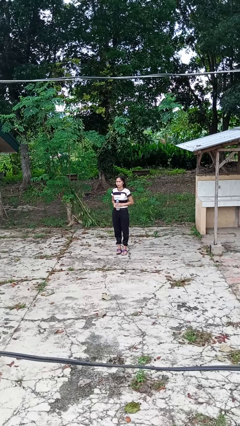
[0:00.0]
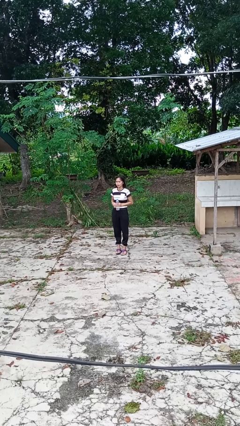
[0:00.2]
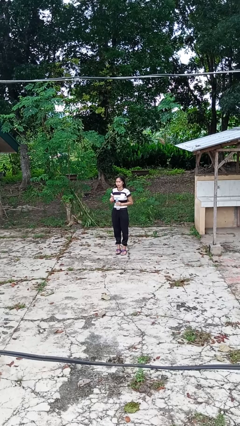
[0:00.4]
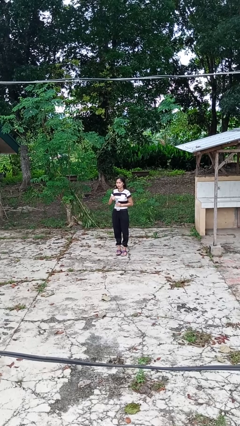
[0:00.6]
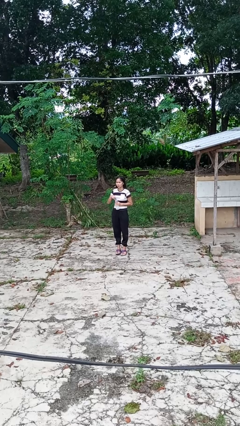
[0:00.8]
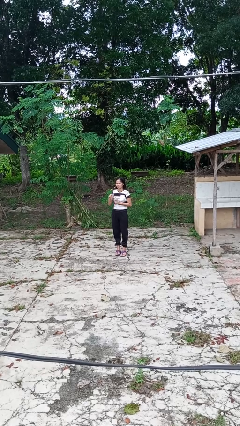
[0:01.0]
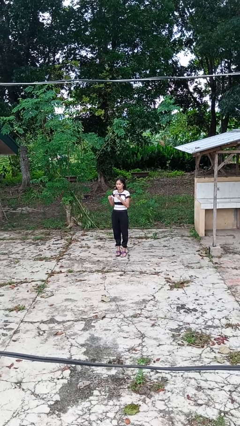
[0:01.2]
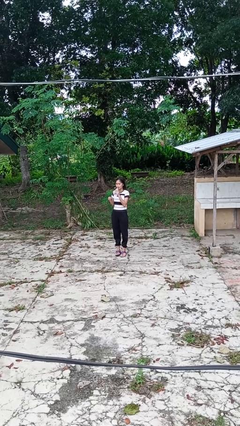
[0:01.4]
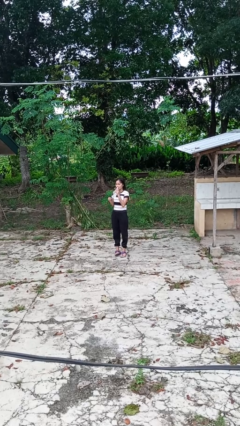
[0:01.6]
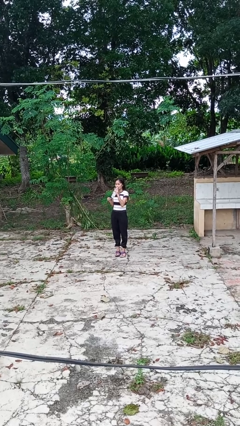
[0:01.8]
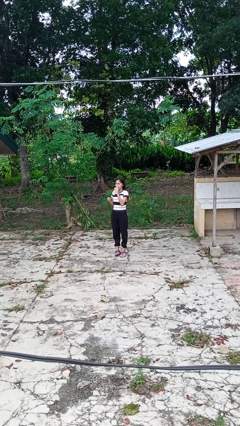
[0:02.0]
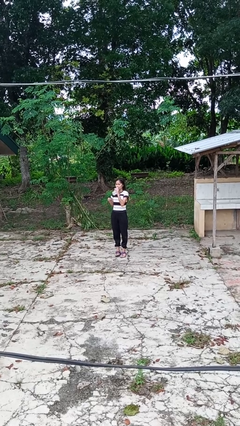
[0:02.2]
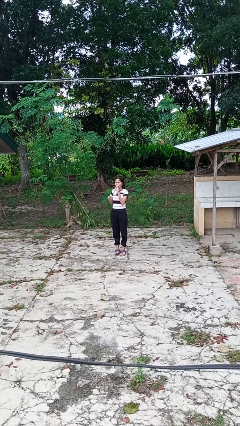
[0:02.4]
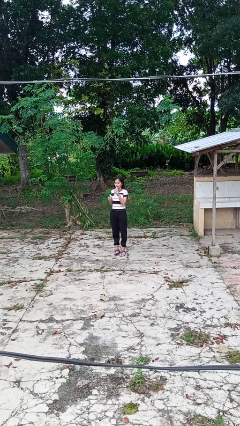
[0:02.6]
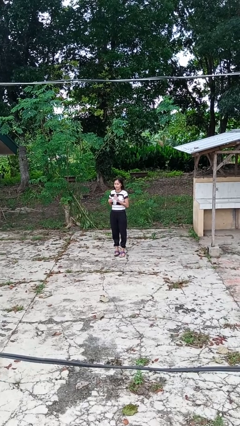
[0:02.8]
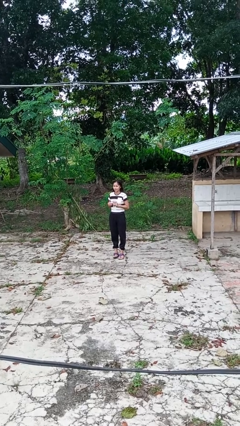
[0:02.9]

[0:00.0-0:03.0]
person drinks from bottle

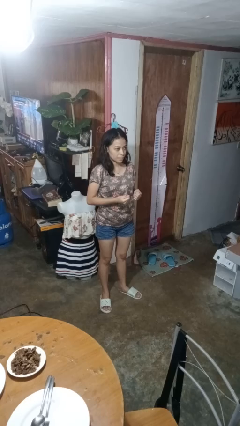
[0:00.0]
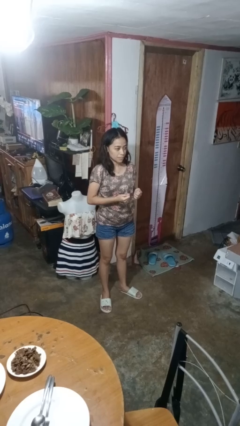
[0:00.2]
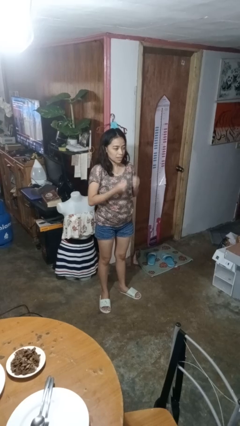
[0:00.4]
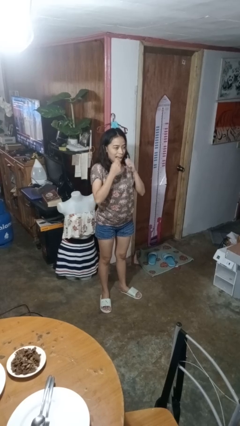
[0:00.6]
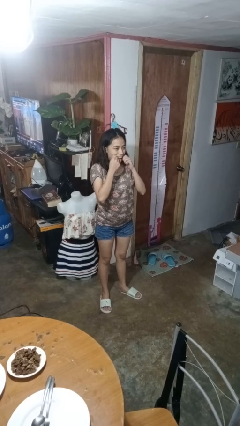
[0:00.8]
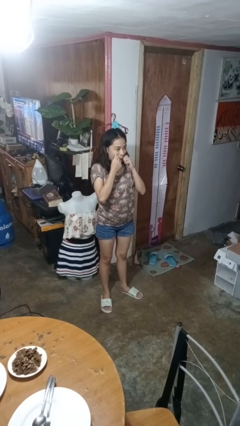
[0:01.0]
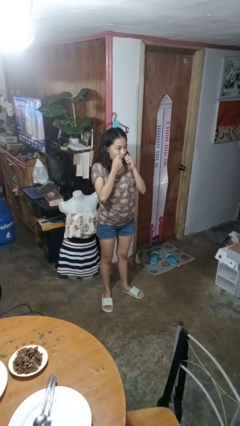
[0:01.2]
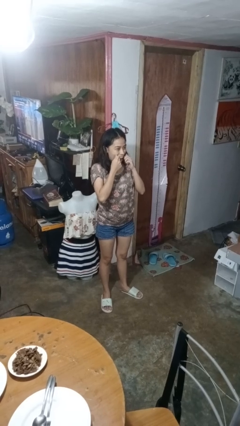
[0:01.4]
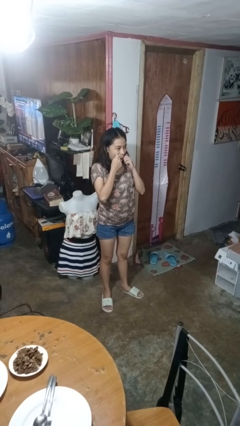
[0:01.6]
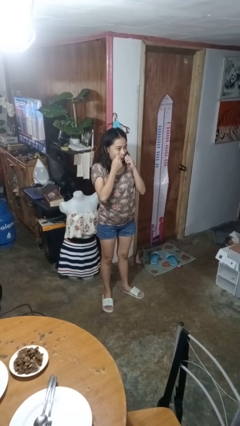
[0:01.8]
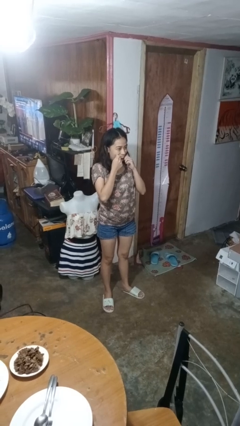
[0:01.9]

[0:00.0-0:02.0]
person flosses

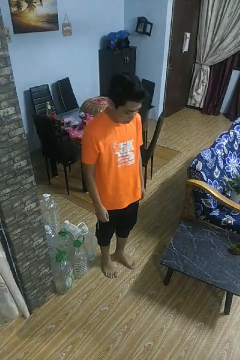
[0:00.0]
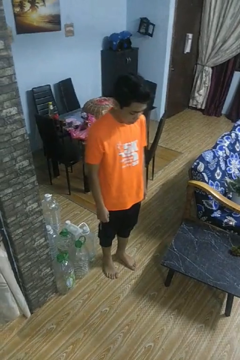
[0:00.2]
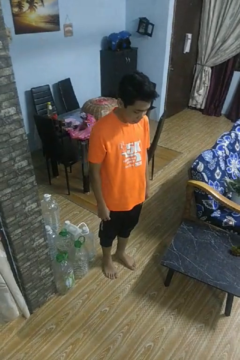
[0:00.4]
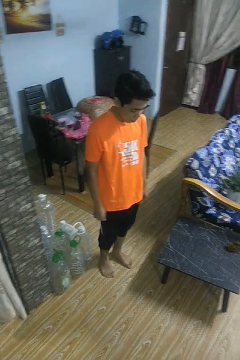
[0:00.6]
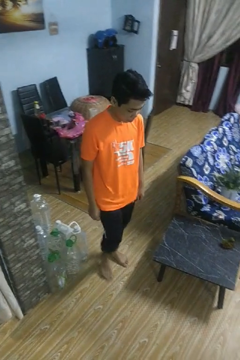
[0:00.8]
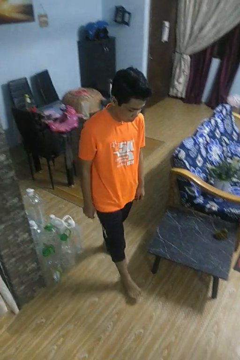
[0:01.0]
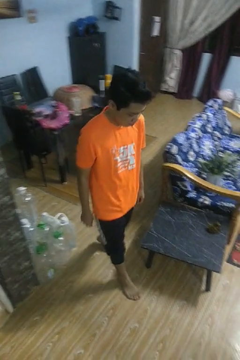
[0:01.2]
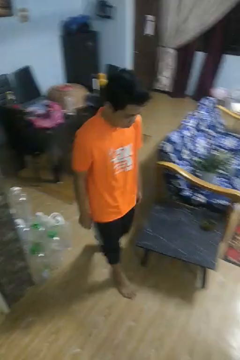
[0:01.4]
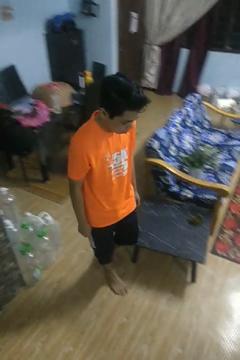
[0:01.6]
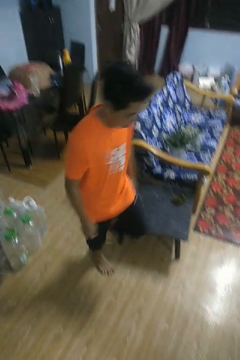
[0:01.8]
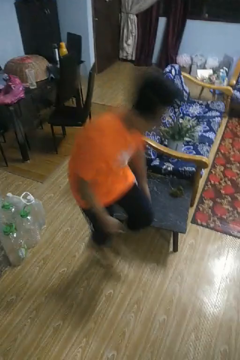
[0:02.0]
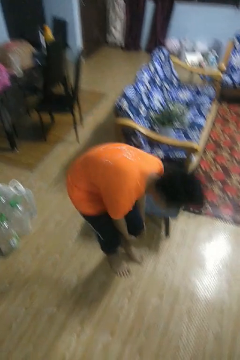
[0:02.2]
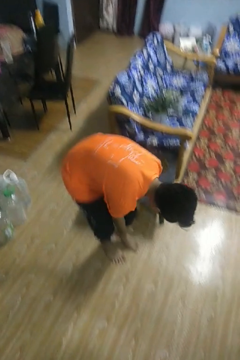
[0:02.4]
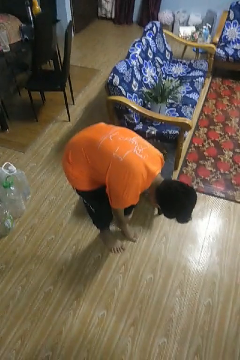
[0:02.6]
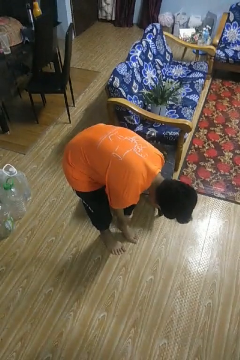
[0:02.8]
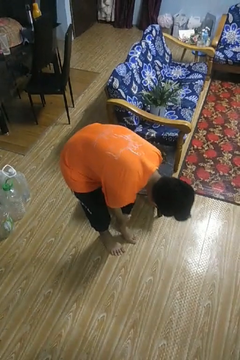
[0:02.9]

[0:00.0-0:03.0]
person bumps into table

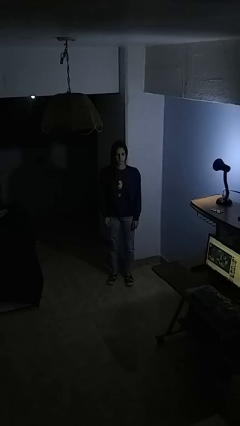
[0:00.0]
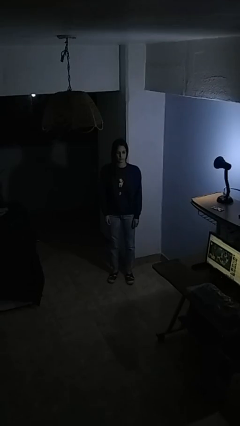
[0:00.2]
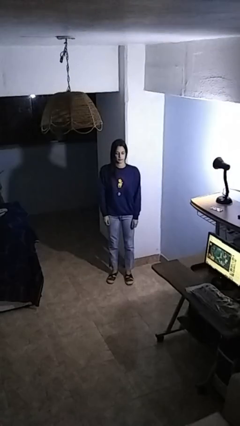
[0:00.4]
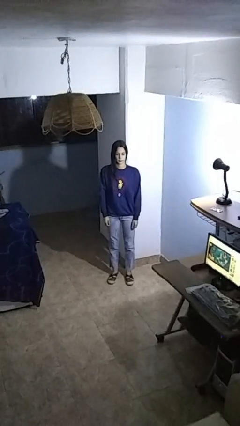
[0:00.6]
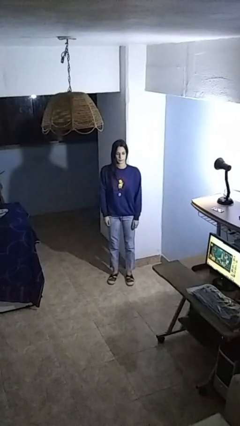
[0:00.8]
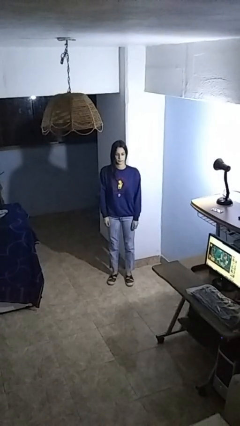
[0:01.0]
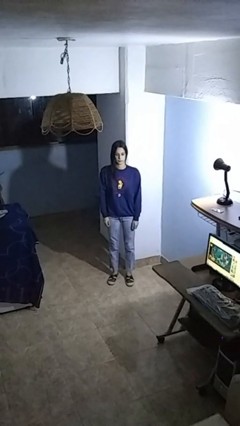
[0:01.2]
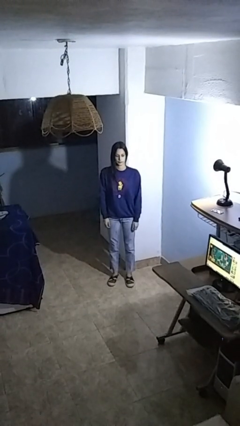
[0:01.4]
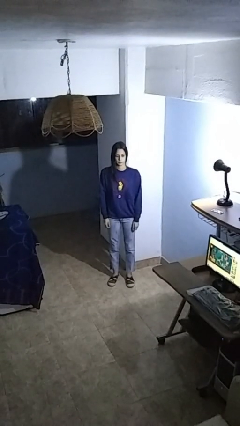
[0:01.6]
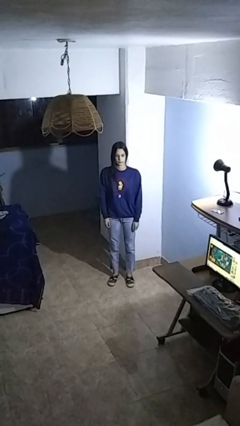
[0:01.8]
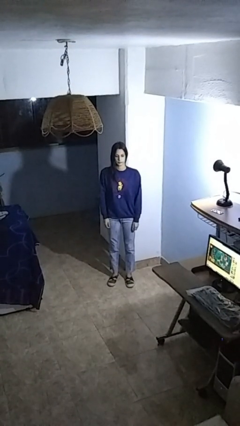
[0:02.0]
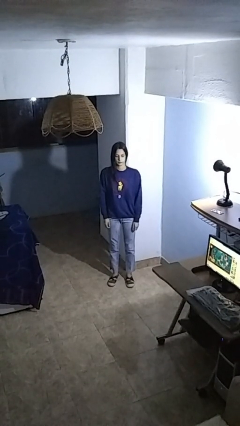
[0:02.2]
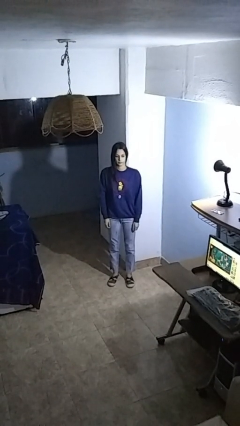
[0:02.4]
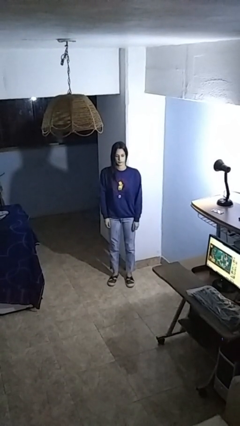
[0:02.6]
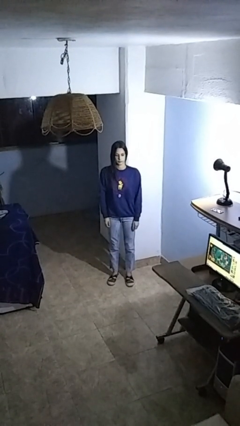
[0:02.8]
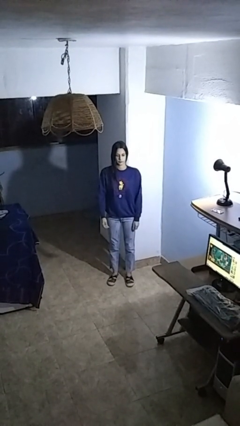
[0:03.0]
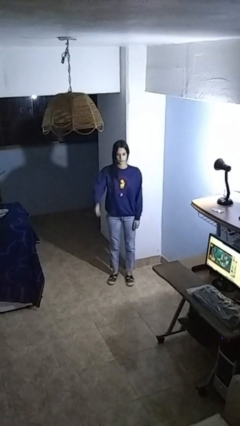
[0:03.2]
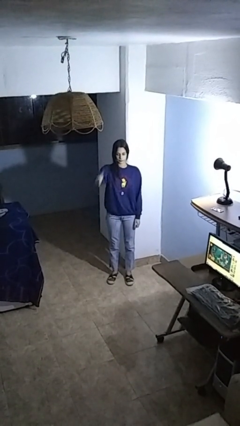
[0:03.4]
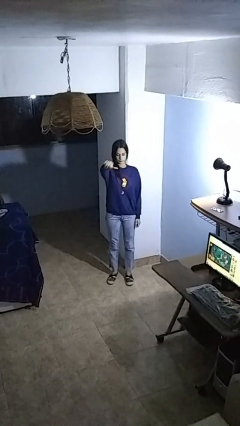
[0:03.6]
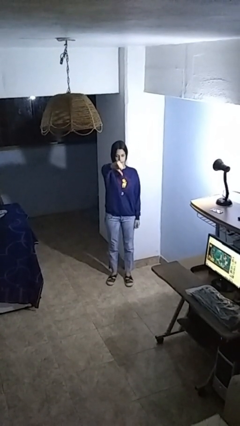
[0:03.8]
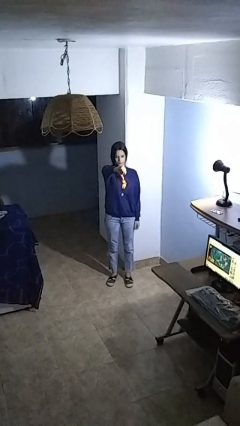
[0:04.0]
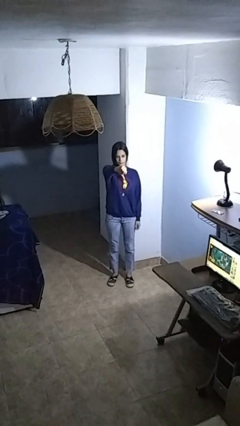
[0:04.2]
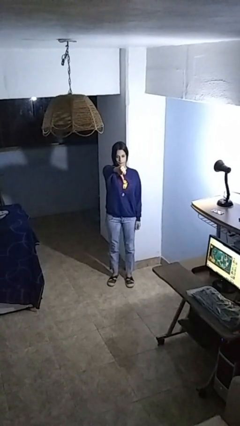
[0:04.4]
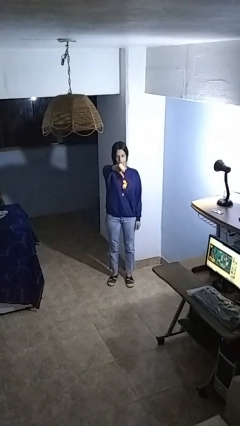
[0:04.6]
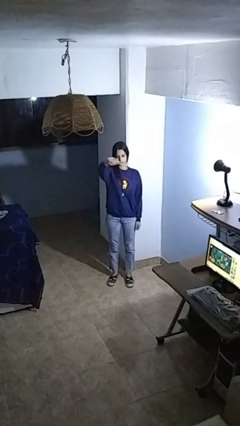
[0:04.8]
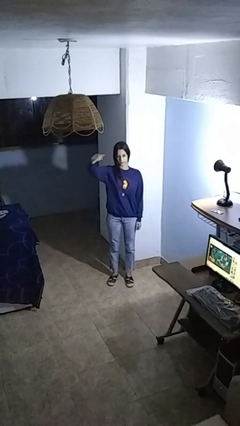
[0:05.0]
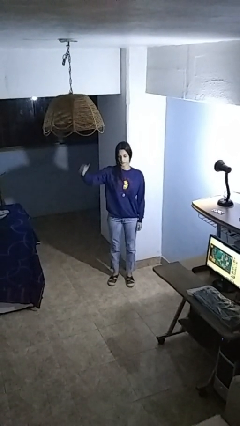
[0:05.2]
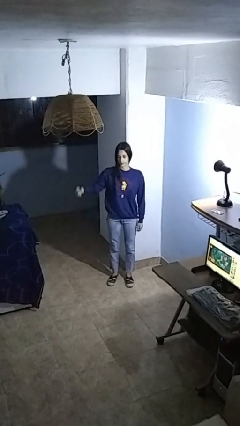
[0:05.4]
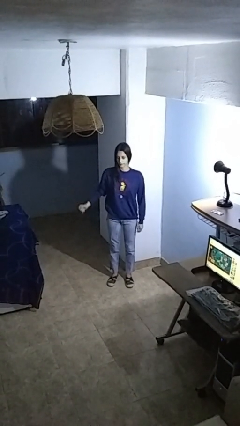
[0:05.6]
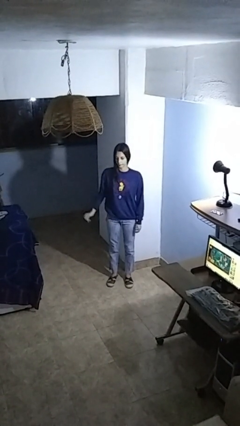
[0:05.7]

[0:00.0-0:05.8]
person gestures thumbs down

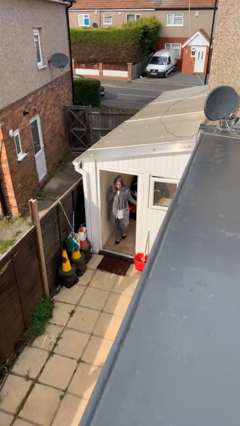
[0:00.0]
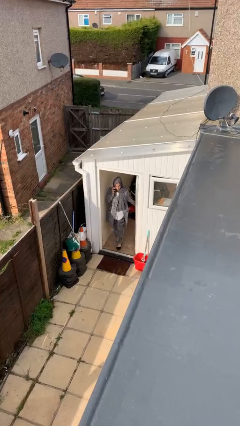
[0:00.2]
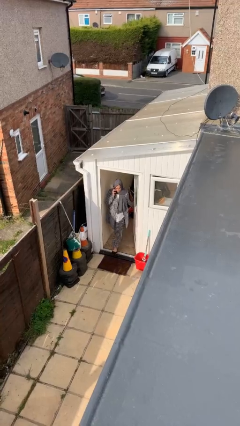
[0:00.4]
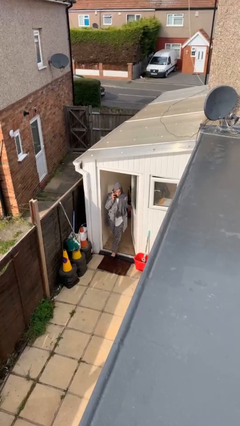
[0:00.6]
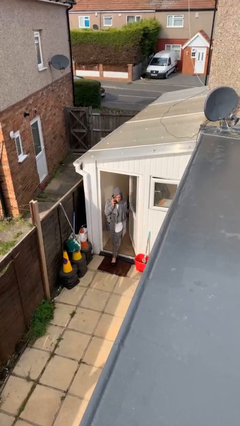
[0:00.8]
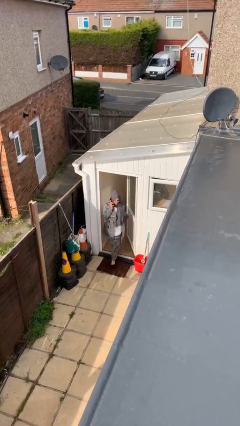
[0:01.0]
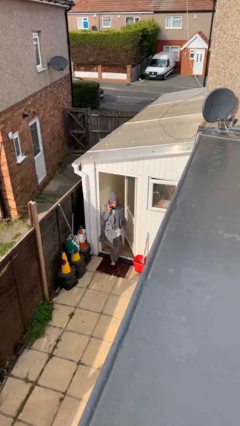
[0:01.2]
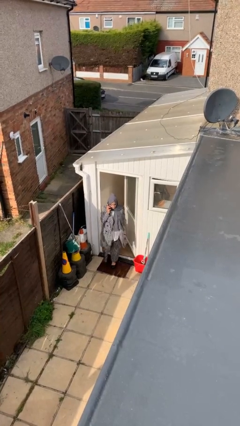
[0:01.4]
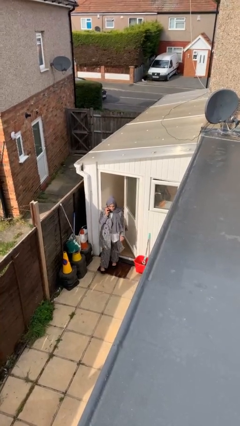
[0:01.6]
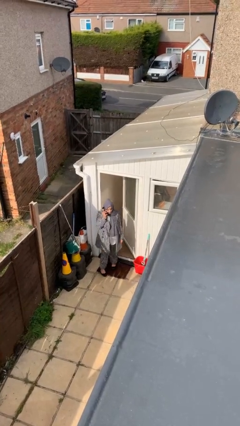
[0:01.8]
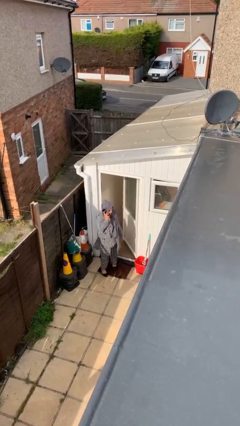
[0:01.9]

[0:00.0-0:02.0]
person enters scene through structure

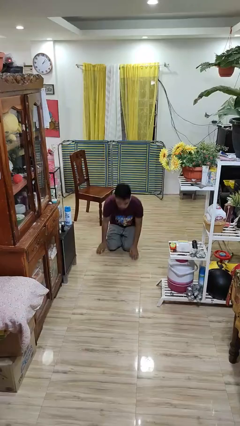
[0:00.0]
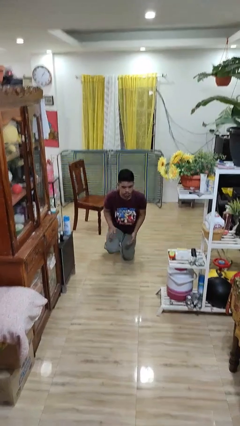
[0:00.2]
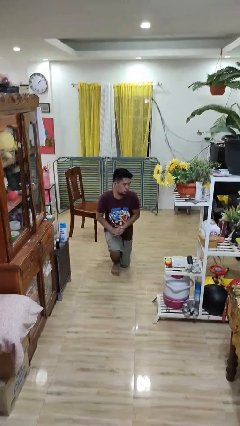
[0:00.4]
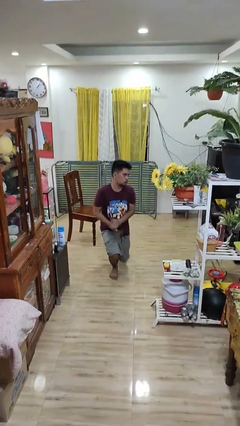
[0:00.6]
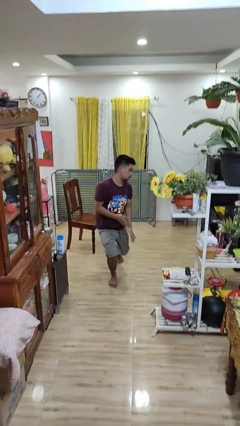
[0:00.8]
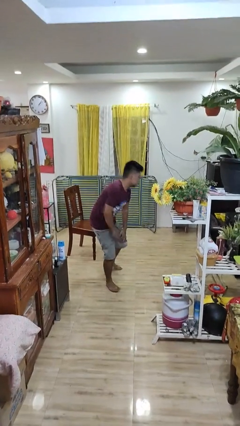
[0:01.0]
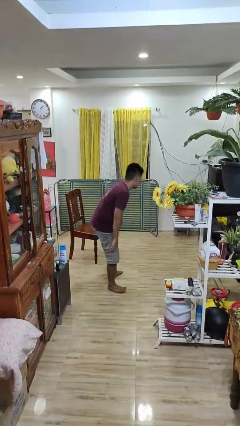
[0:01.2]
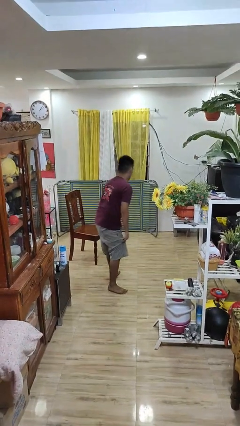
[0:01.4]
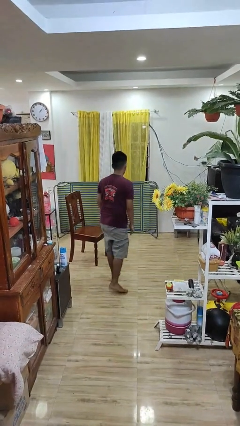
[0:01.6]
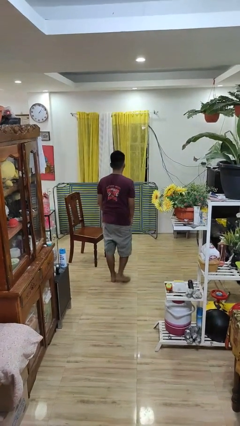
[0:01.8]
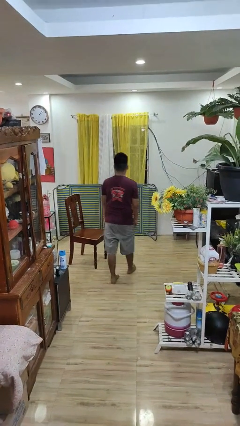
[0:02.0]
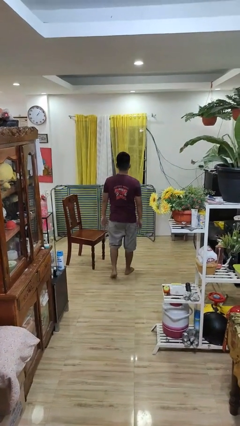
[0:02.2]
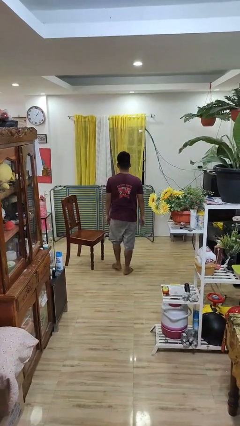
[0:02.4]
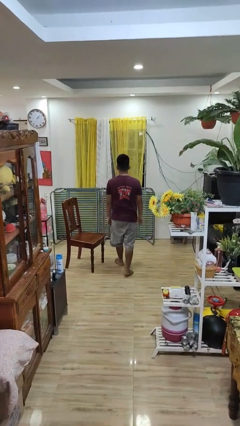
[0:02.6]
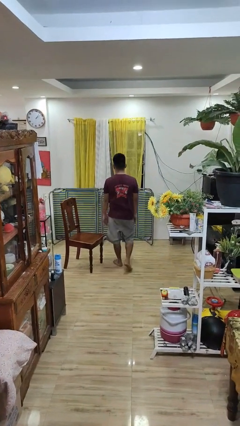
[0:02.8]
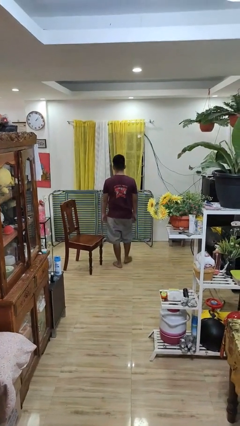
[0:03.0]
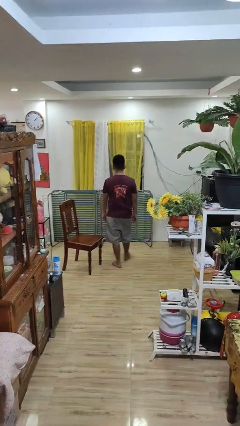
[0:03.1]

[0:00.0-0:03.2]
person stands up from floor
